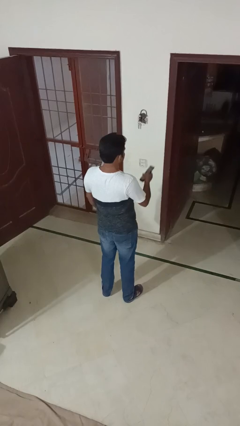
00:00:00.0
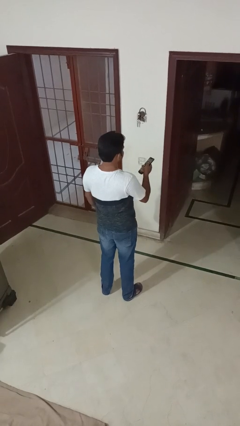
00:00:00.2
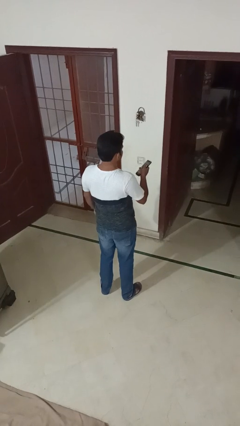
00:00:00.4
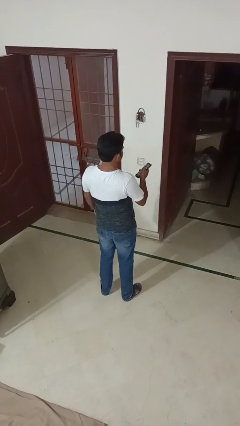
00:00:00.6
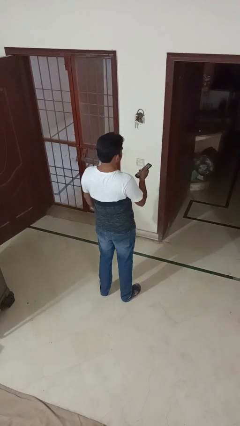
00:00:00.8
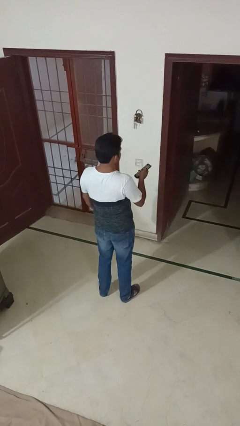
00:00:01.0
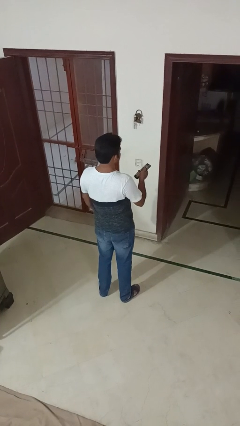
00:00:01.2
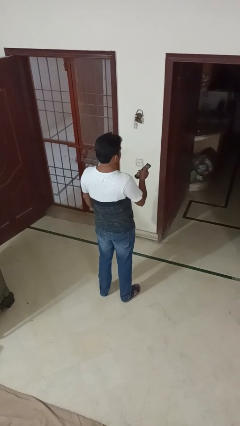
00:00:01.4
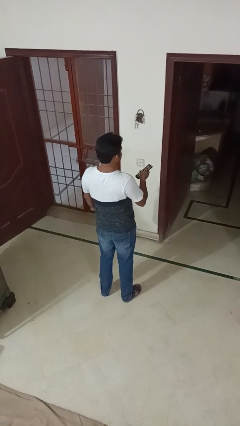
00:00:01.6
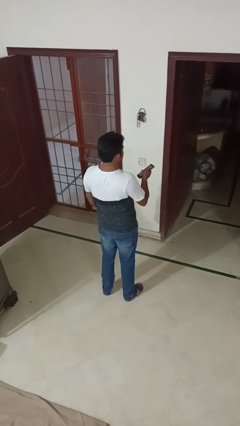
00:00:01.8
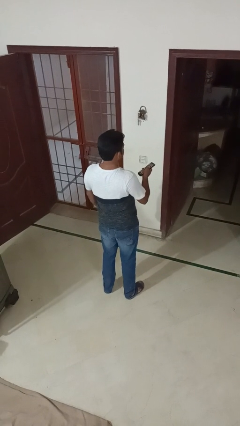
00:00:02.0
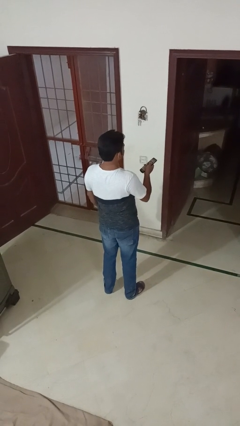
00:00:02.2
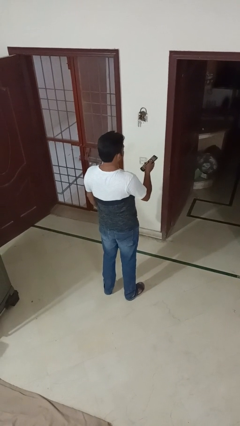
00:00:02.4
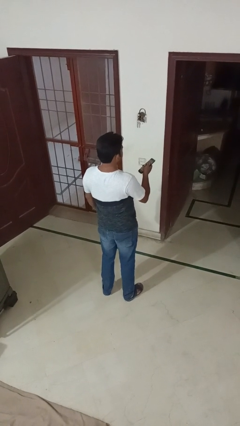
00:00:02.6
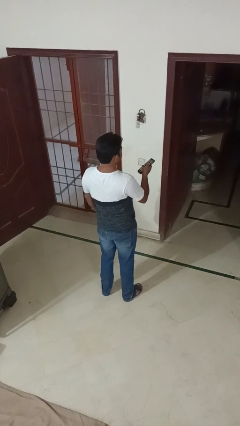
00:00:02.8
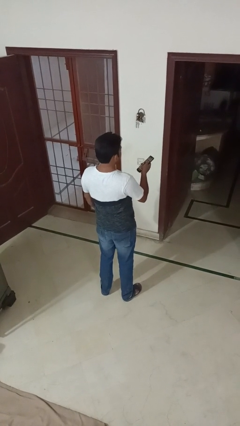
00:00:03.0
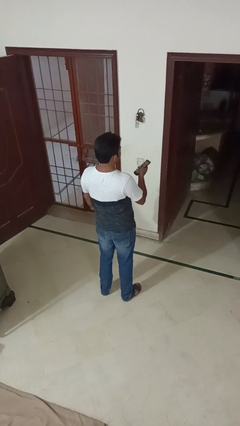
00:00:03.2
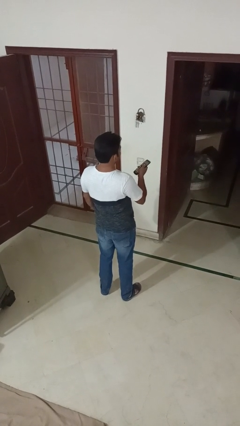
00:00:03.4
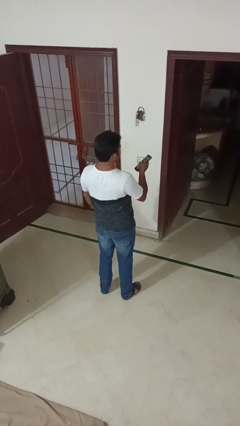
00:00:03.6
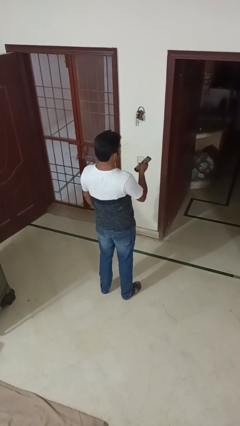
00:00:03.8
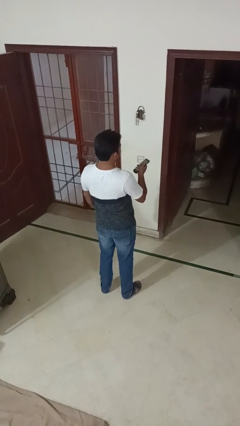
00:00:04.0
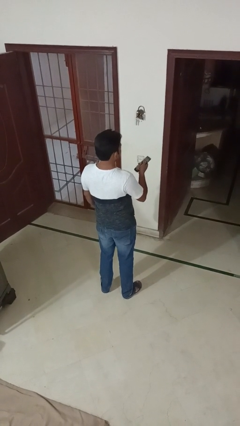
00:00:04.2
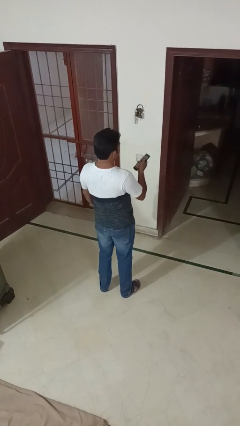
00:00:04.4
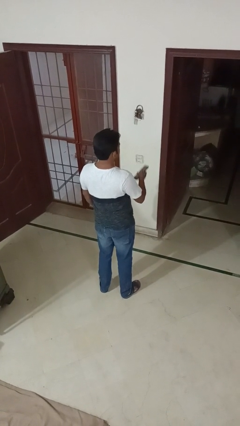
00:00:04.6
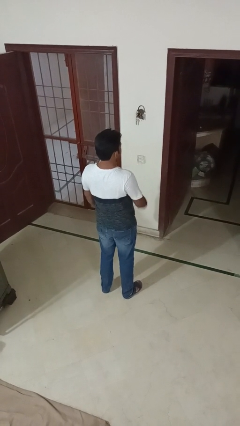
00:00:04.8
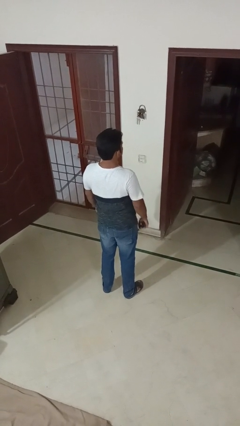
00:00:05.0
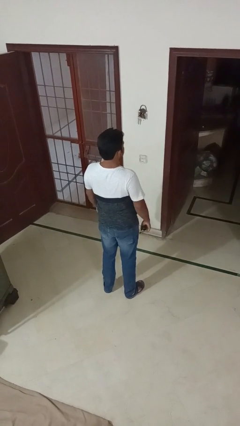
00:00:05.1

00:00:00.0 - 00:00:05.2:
person uses television remote

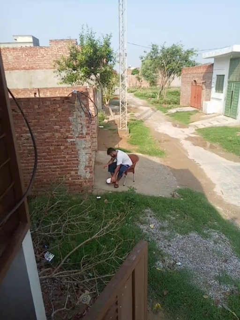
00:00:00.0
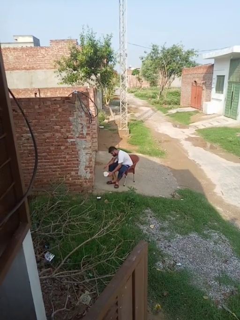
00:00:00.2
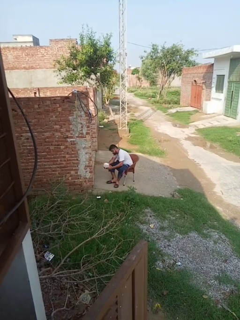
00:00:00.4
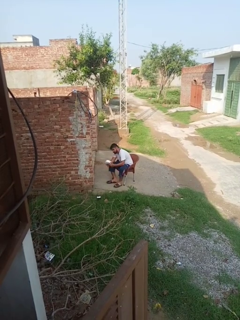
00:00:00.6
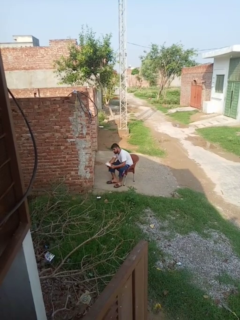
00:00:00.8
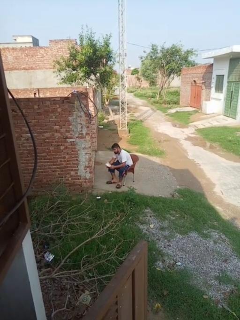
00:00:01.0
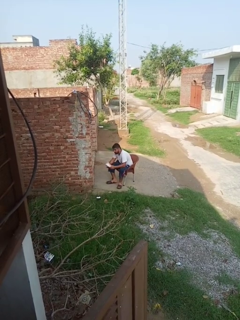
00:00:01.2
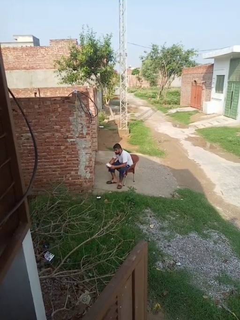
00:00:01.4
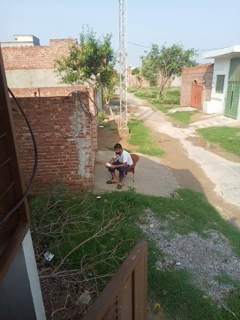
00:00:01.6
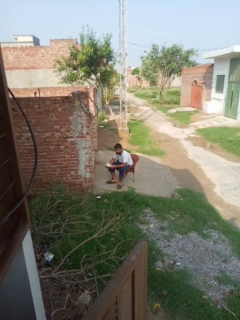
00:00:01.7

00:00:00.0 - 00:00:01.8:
person picks up object from floor

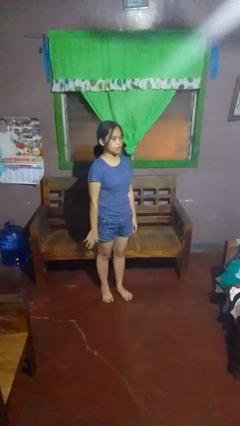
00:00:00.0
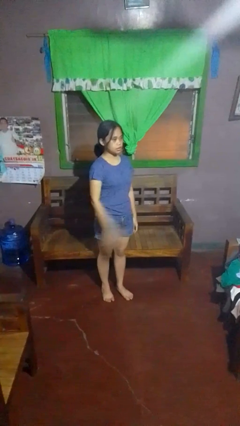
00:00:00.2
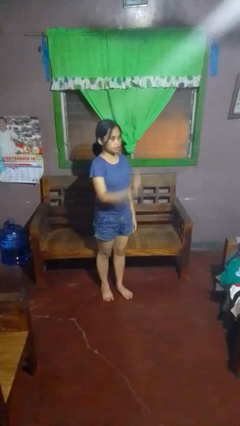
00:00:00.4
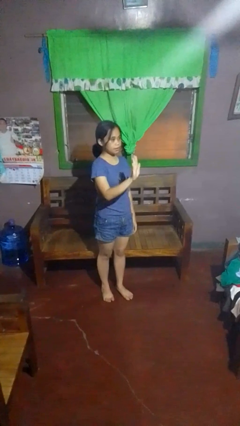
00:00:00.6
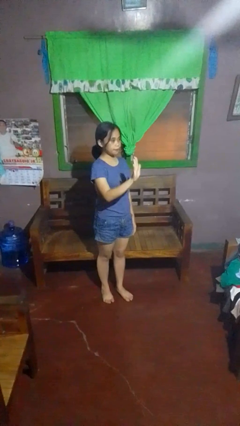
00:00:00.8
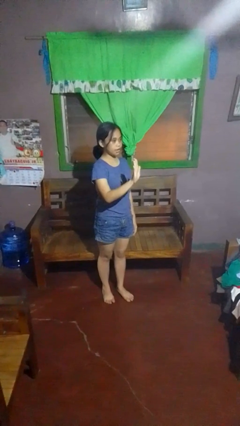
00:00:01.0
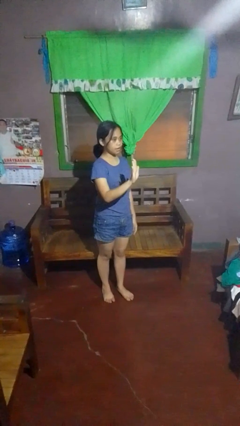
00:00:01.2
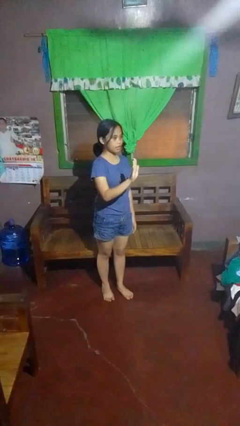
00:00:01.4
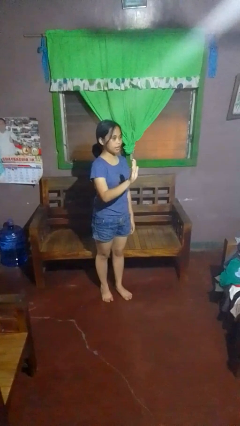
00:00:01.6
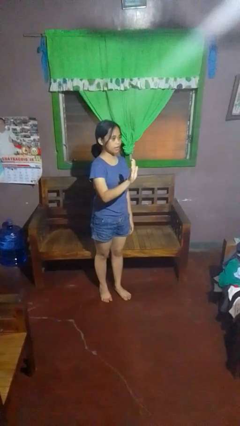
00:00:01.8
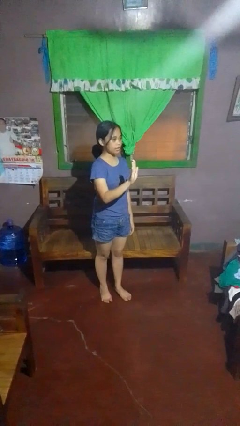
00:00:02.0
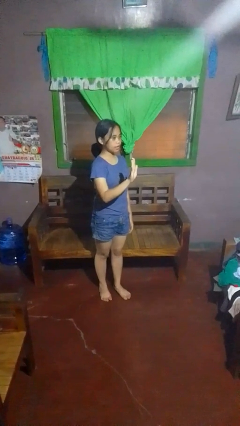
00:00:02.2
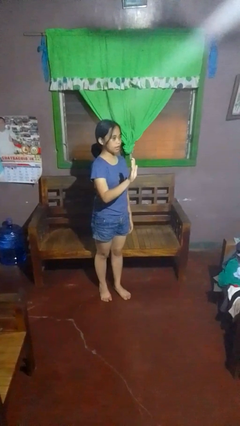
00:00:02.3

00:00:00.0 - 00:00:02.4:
person gestures stop

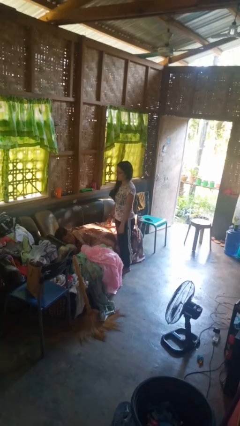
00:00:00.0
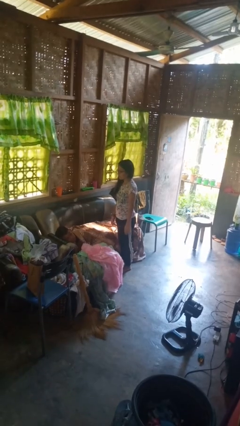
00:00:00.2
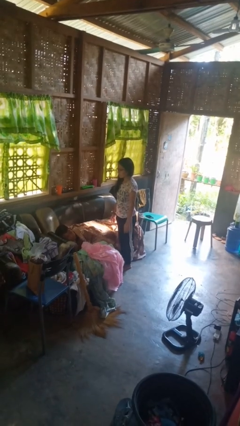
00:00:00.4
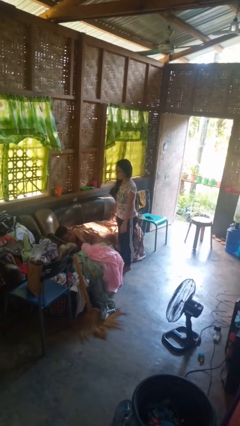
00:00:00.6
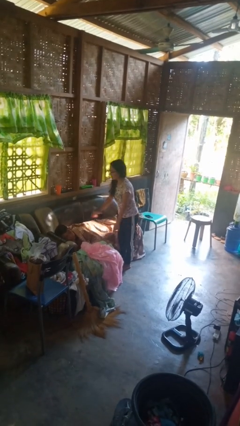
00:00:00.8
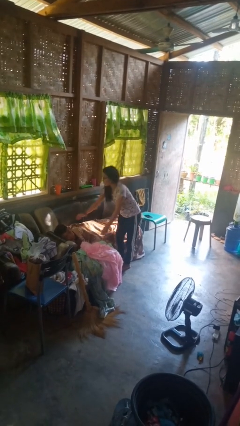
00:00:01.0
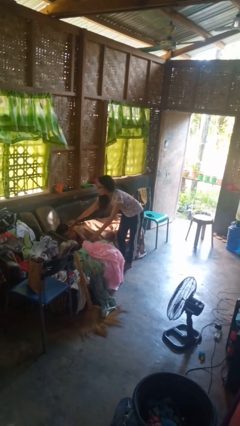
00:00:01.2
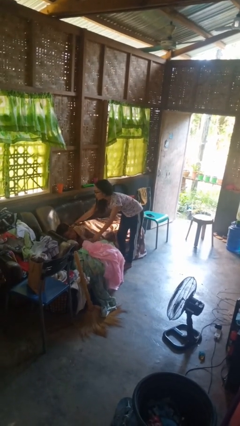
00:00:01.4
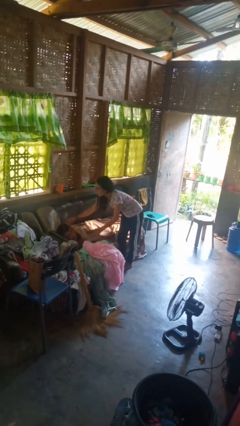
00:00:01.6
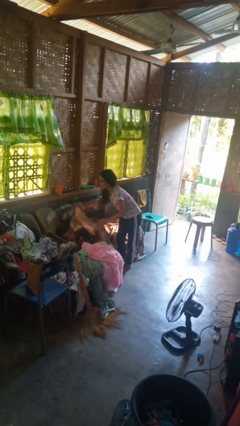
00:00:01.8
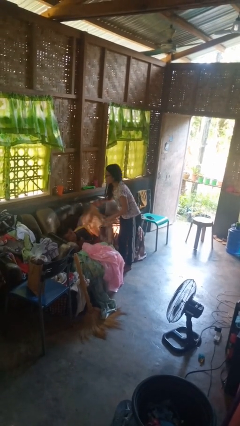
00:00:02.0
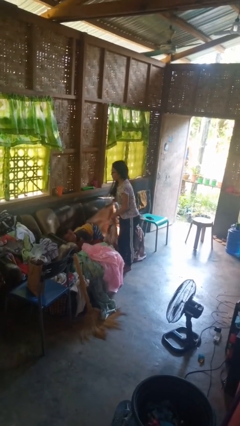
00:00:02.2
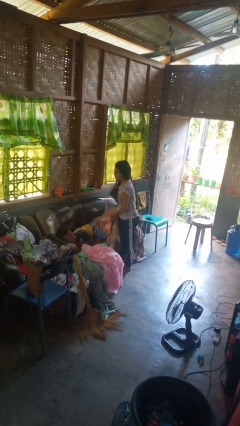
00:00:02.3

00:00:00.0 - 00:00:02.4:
person uncovers friend with blanket

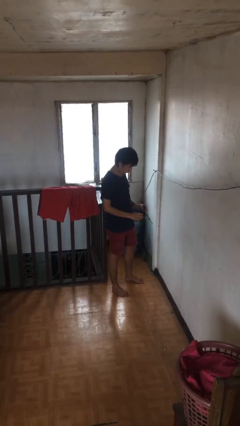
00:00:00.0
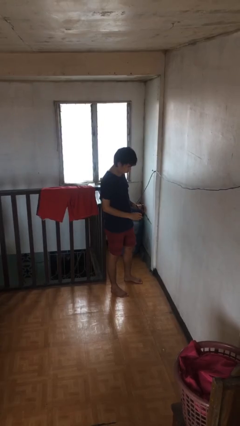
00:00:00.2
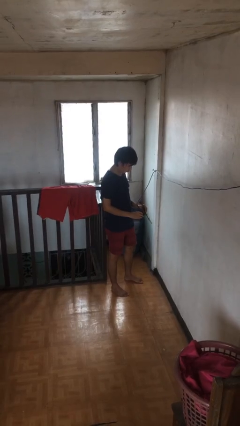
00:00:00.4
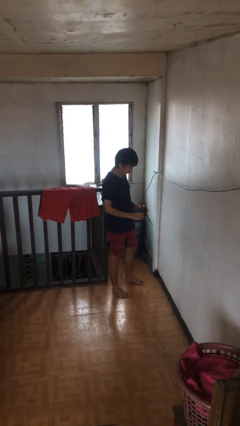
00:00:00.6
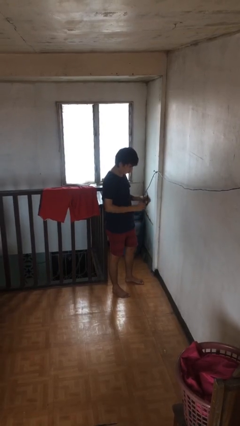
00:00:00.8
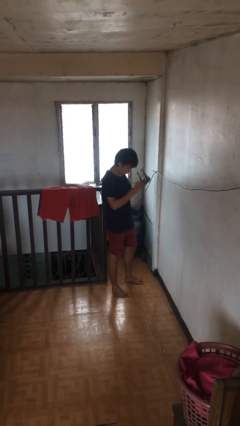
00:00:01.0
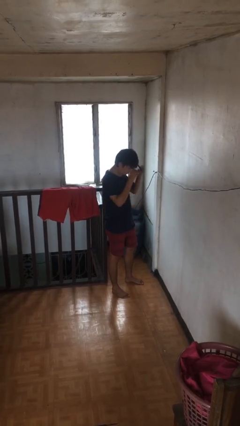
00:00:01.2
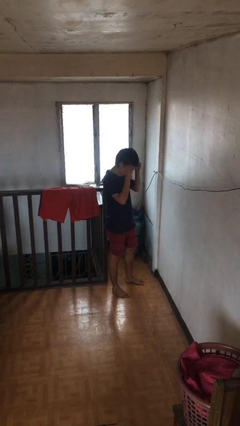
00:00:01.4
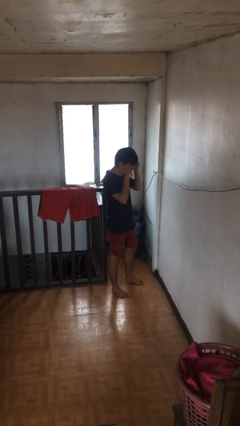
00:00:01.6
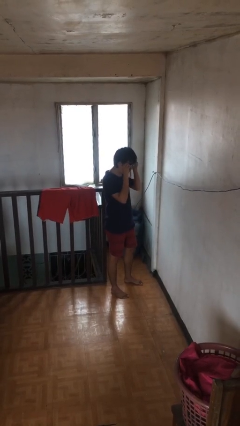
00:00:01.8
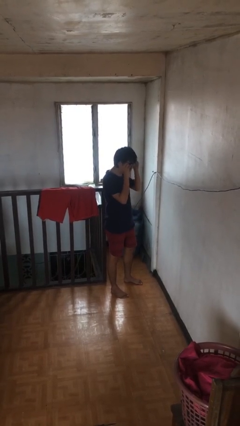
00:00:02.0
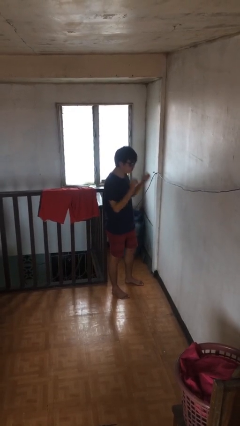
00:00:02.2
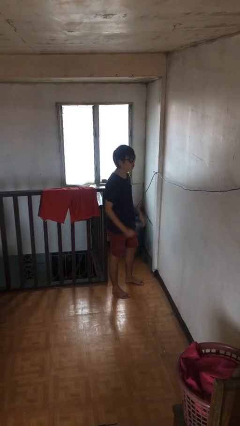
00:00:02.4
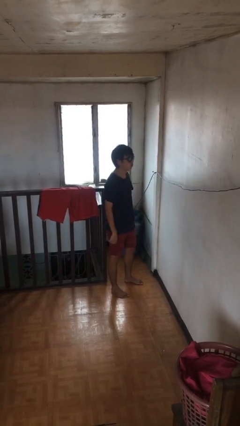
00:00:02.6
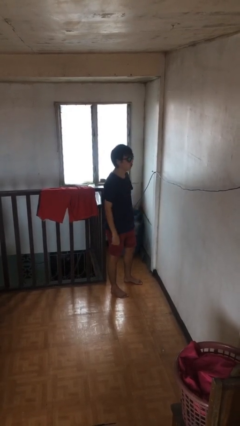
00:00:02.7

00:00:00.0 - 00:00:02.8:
person puts on sunglasses

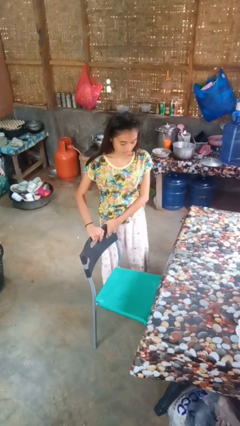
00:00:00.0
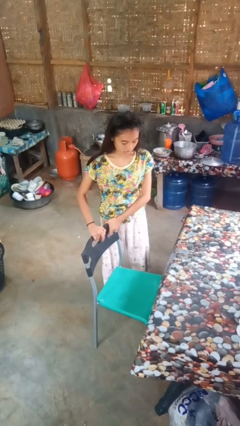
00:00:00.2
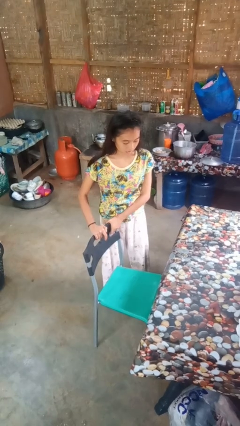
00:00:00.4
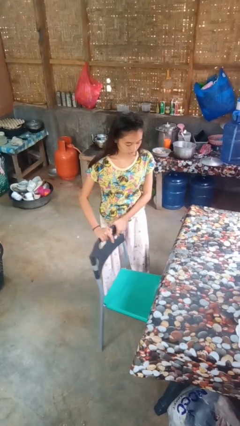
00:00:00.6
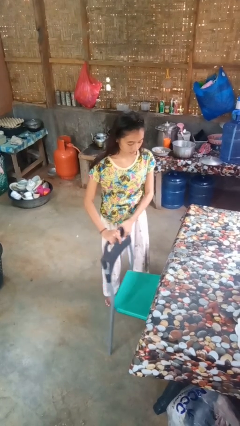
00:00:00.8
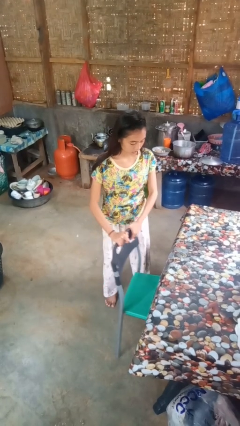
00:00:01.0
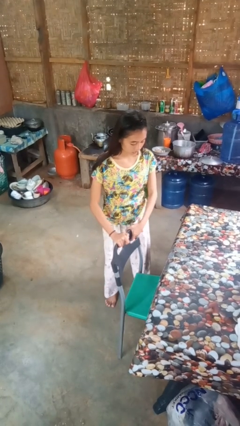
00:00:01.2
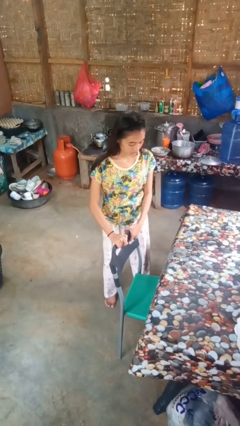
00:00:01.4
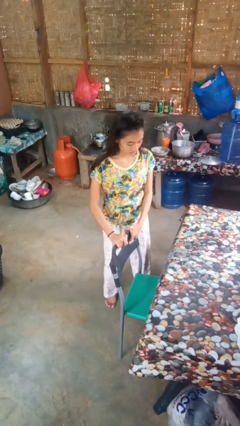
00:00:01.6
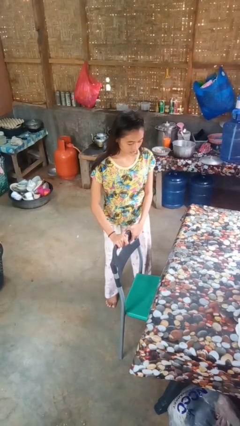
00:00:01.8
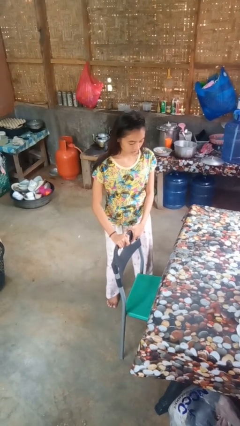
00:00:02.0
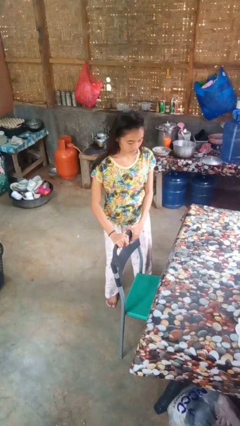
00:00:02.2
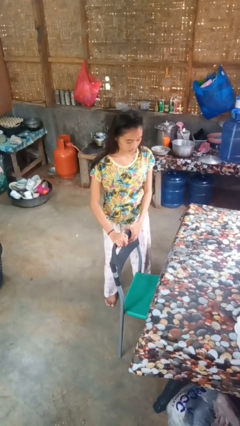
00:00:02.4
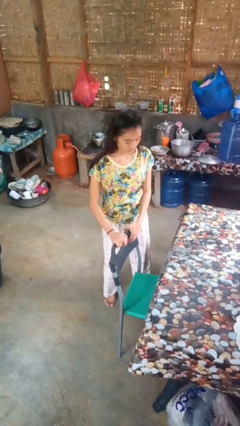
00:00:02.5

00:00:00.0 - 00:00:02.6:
person pushes in chair

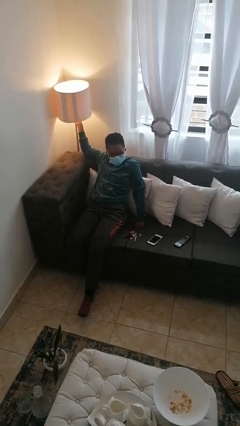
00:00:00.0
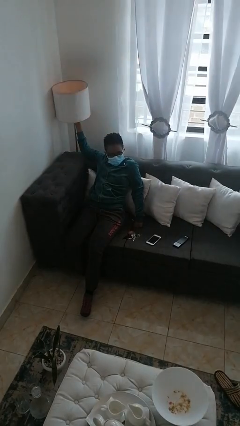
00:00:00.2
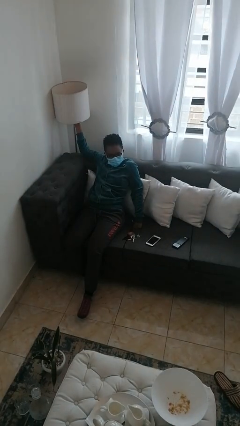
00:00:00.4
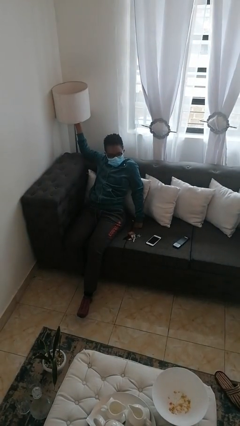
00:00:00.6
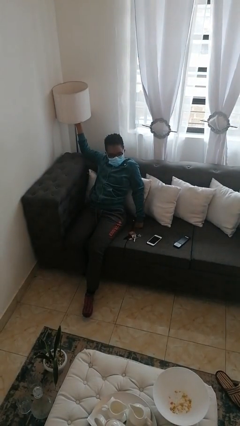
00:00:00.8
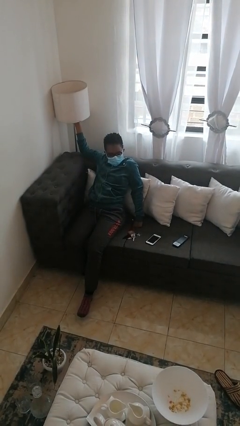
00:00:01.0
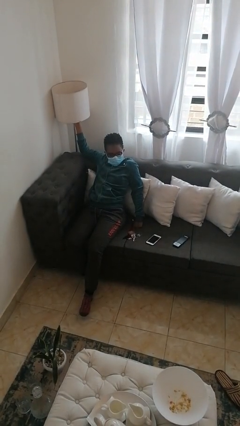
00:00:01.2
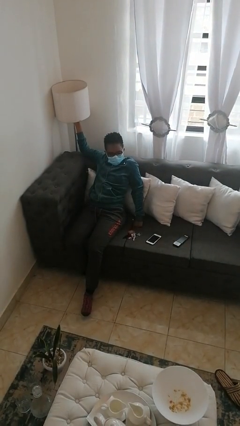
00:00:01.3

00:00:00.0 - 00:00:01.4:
person turns off lamp
